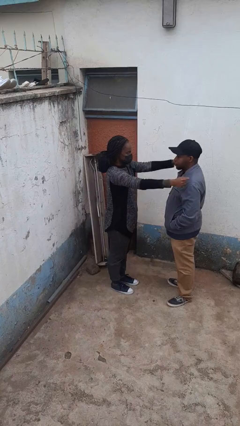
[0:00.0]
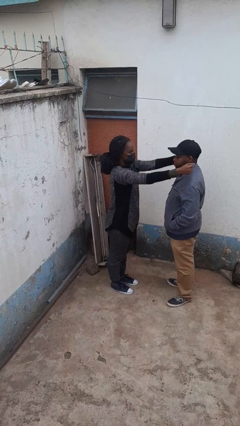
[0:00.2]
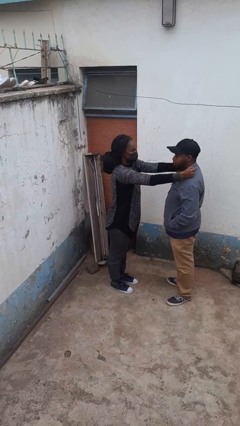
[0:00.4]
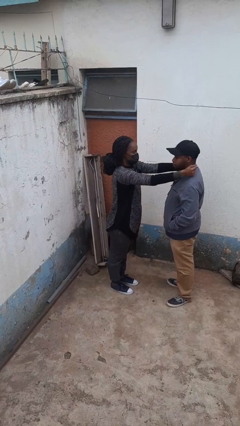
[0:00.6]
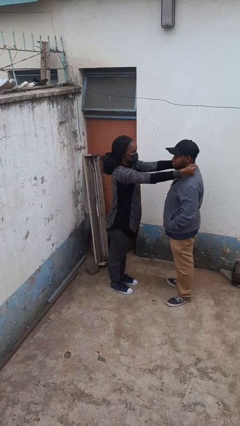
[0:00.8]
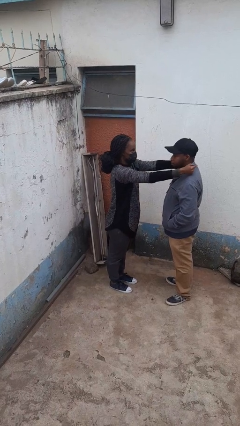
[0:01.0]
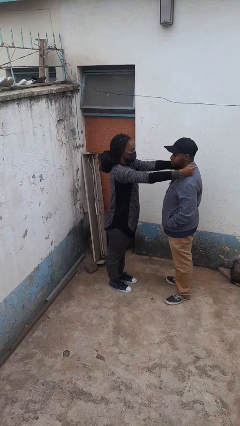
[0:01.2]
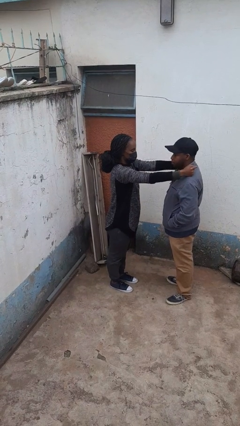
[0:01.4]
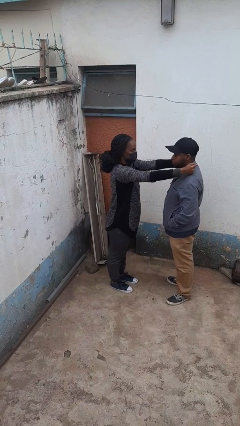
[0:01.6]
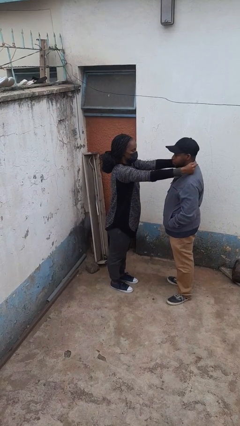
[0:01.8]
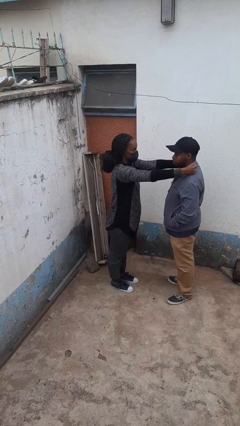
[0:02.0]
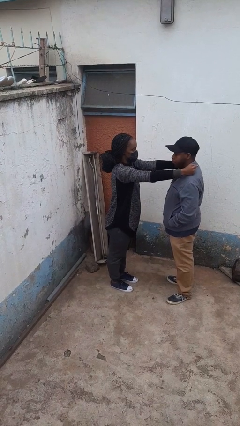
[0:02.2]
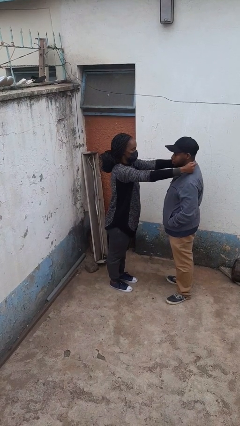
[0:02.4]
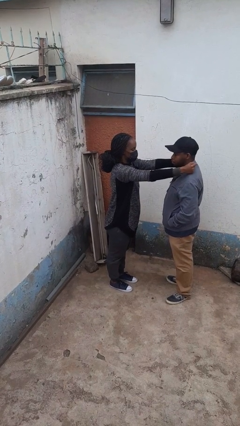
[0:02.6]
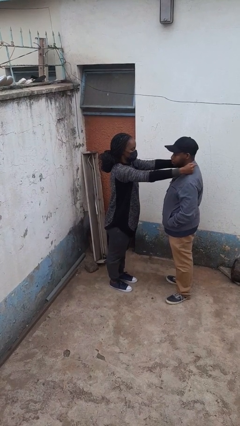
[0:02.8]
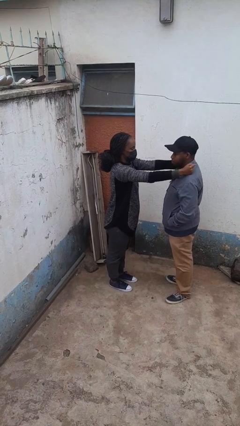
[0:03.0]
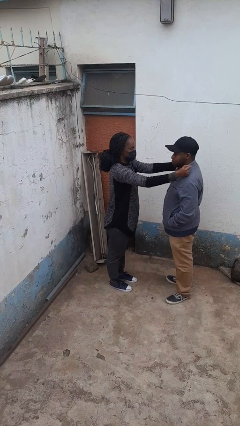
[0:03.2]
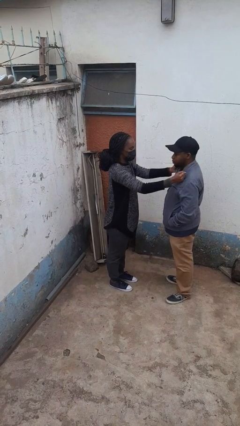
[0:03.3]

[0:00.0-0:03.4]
person pounds shoulders of person

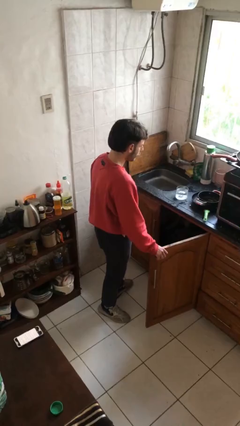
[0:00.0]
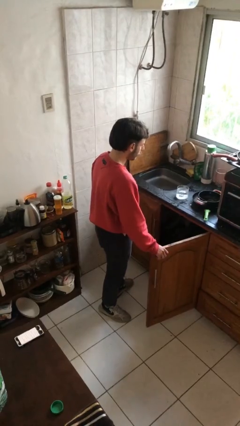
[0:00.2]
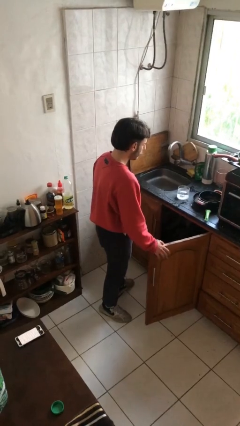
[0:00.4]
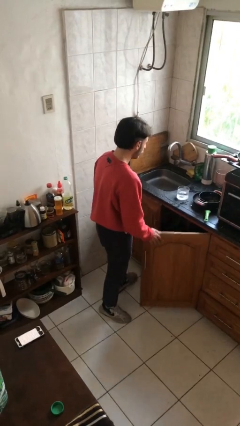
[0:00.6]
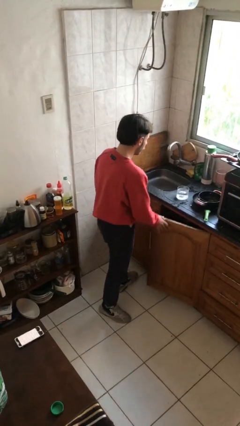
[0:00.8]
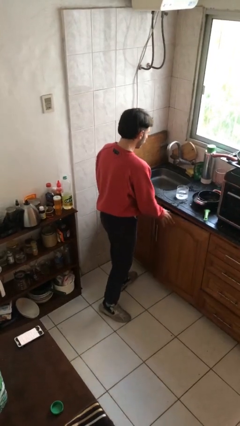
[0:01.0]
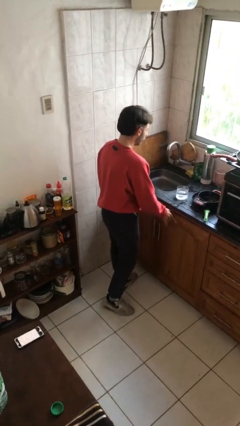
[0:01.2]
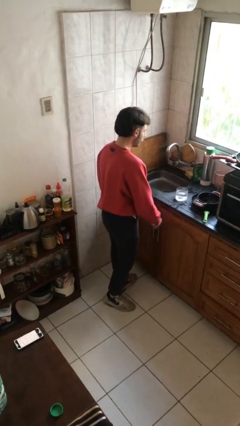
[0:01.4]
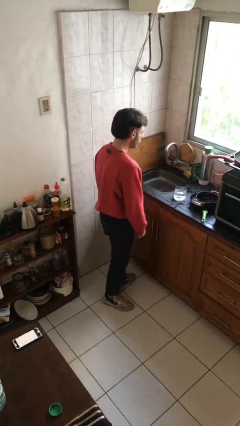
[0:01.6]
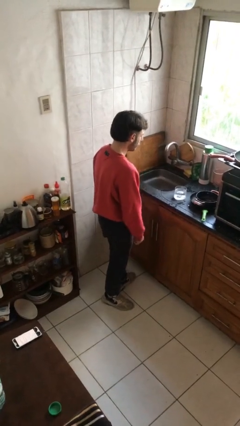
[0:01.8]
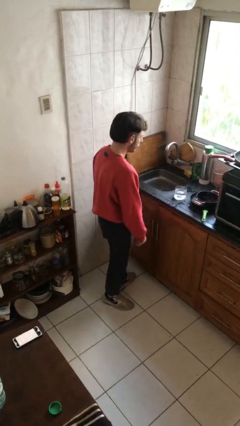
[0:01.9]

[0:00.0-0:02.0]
person closes cabinet

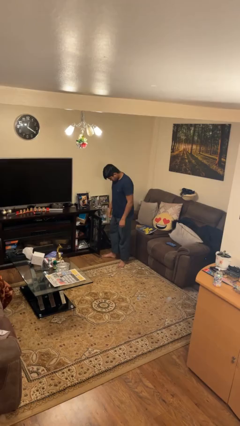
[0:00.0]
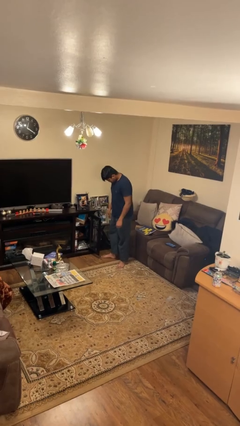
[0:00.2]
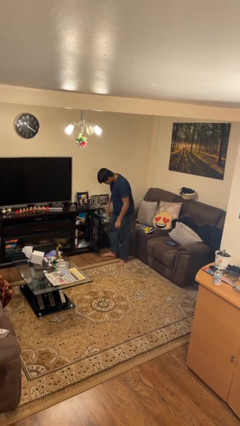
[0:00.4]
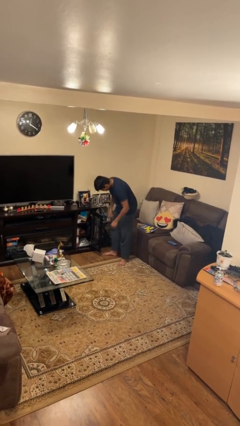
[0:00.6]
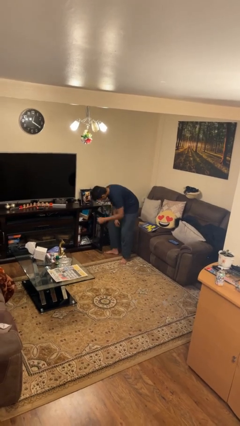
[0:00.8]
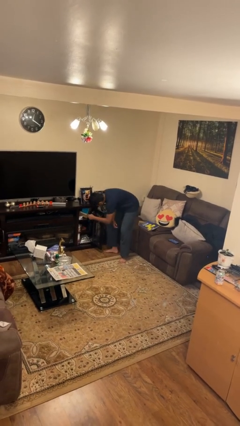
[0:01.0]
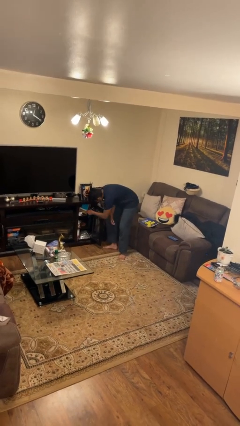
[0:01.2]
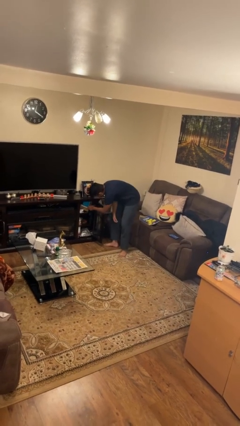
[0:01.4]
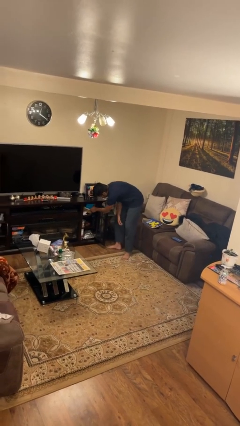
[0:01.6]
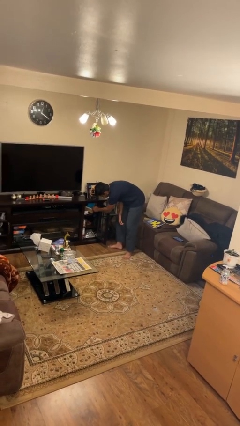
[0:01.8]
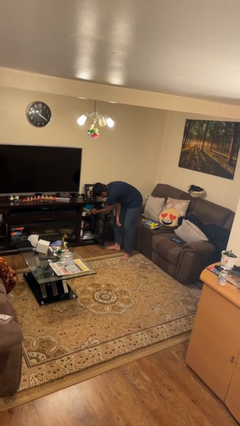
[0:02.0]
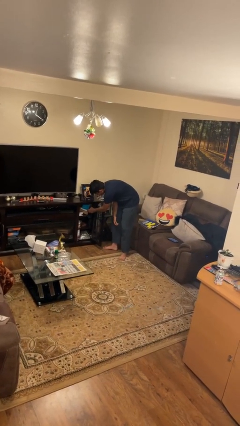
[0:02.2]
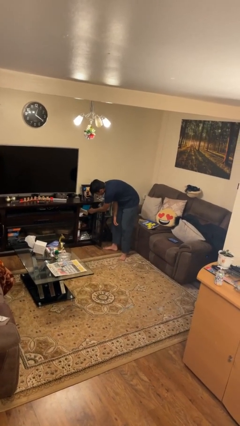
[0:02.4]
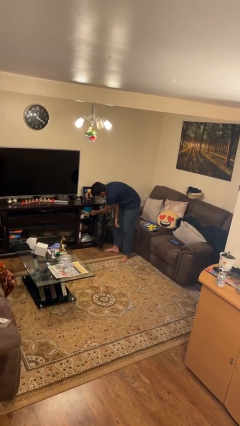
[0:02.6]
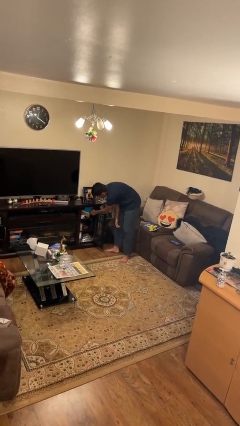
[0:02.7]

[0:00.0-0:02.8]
person searches in cabinet

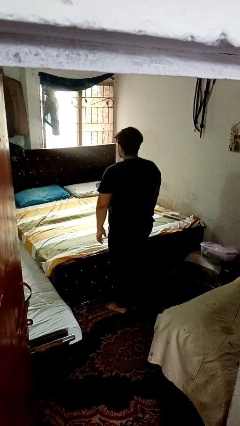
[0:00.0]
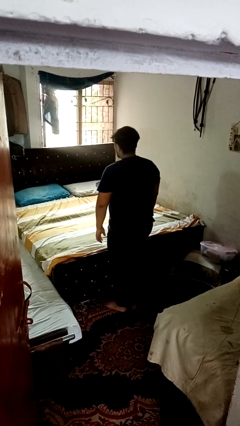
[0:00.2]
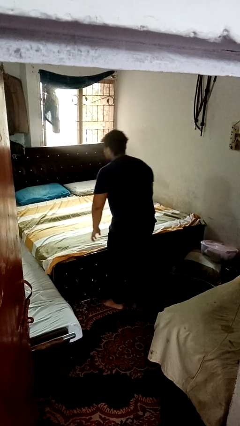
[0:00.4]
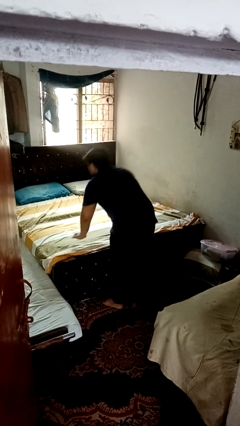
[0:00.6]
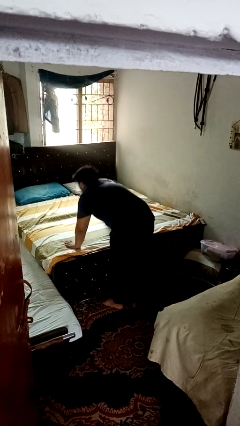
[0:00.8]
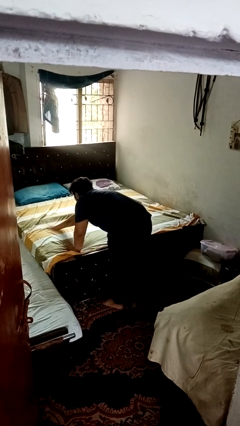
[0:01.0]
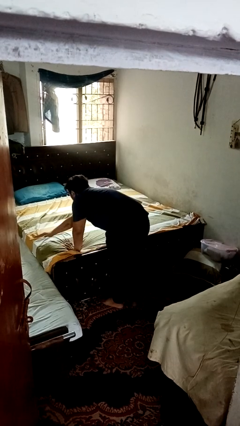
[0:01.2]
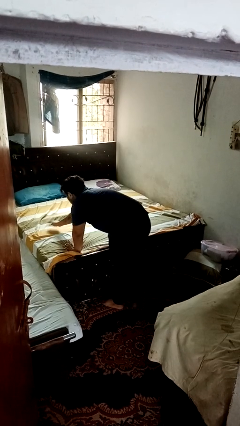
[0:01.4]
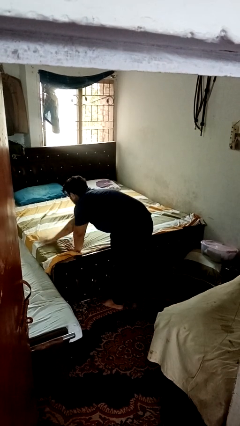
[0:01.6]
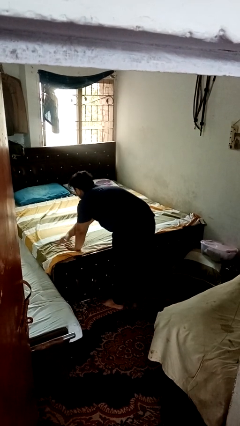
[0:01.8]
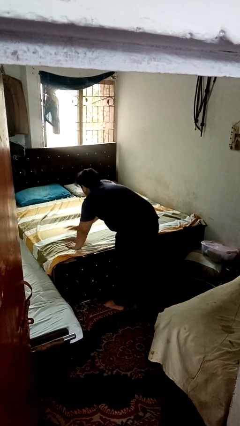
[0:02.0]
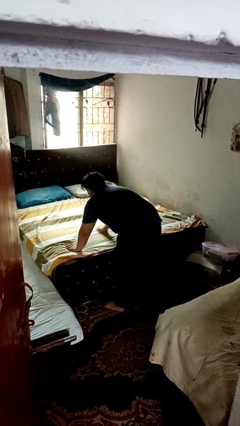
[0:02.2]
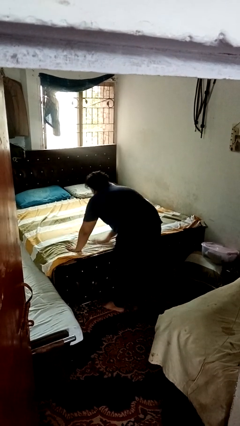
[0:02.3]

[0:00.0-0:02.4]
person makes bed

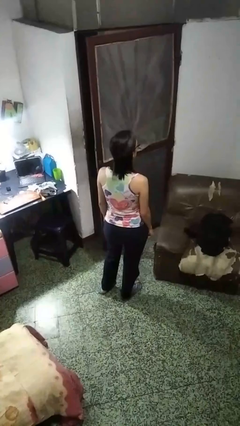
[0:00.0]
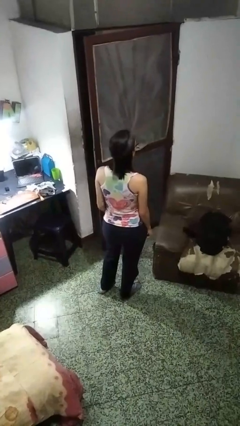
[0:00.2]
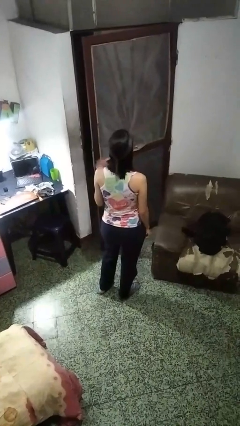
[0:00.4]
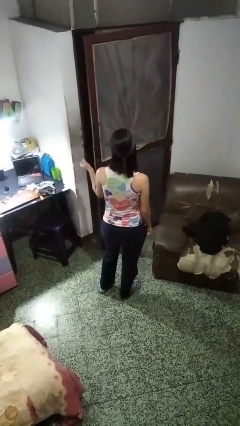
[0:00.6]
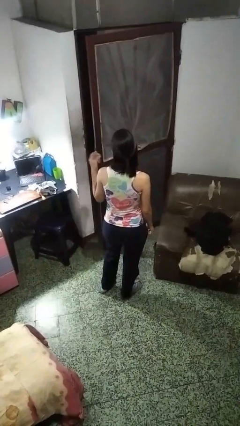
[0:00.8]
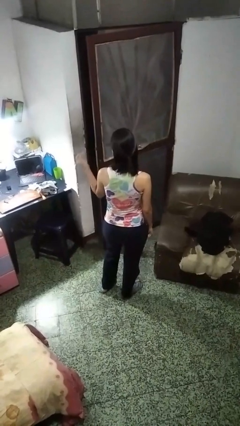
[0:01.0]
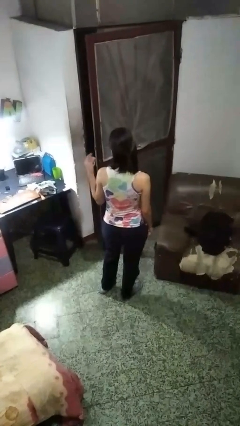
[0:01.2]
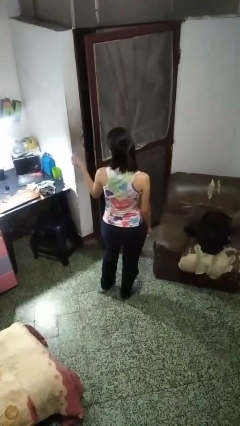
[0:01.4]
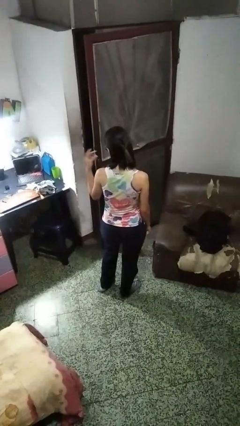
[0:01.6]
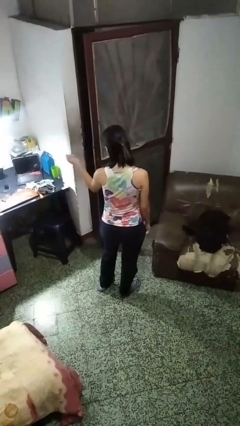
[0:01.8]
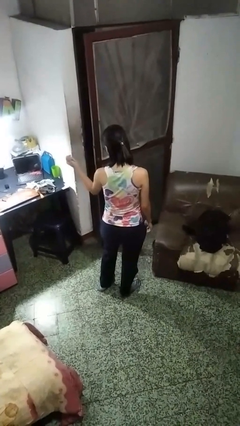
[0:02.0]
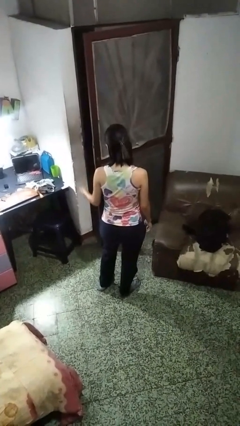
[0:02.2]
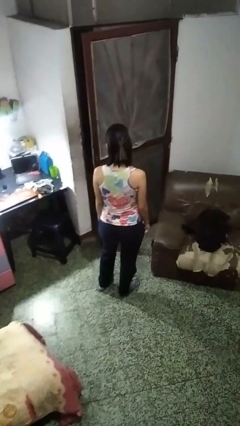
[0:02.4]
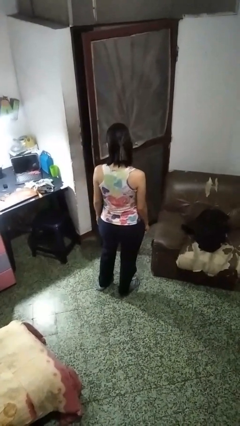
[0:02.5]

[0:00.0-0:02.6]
person snaps fingers

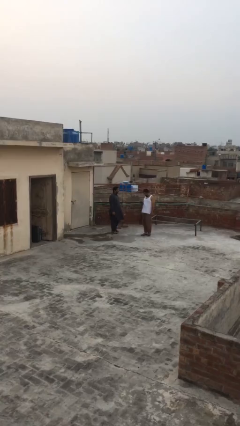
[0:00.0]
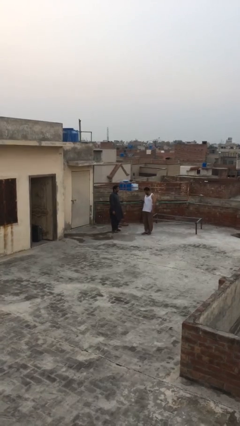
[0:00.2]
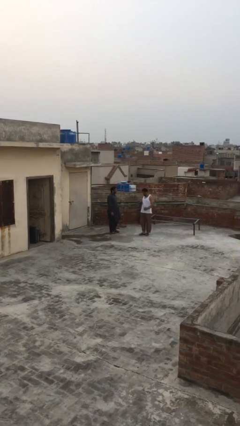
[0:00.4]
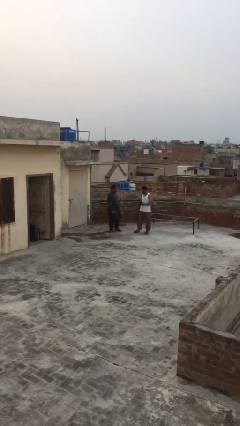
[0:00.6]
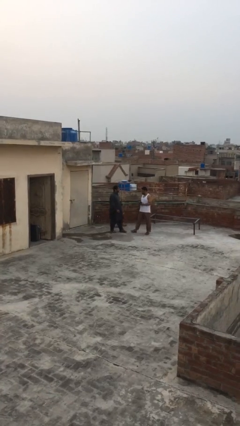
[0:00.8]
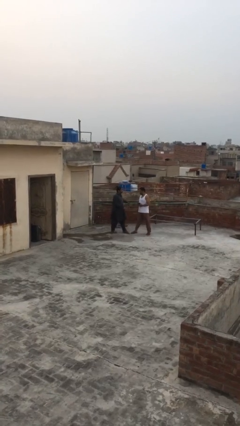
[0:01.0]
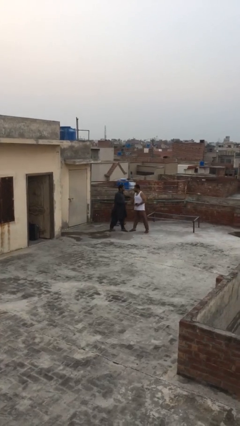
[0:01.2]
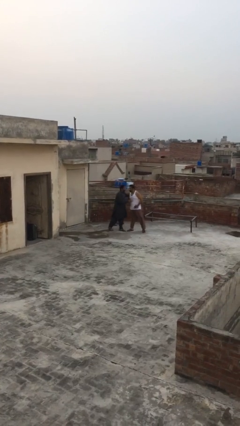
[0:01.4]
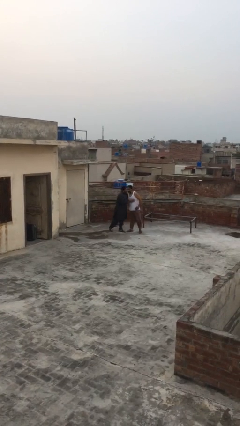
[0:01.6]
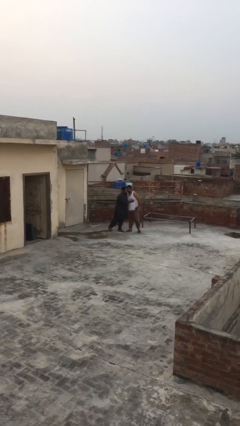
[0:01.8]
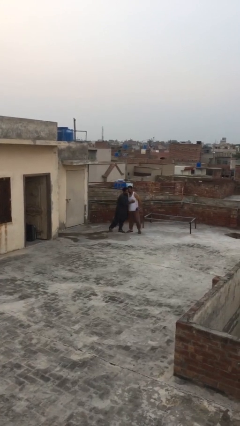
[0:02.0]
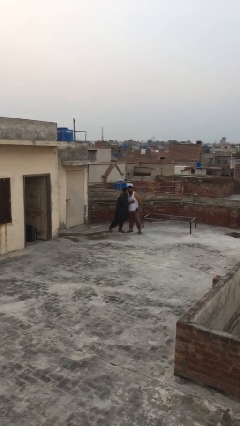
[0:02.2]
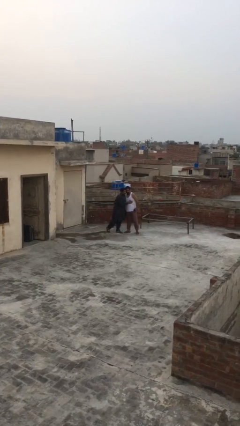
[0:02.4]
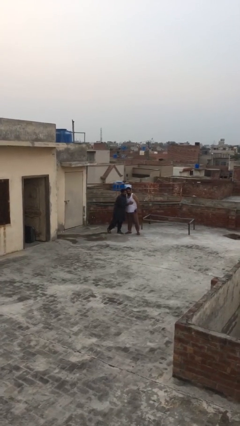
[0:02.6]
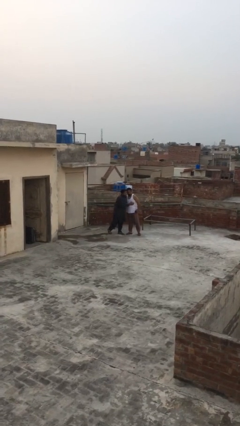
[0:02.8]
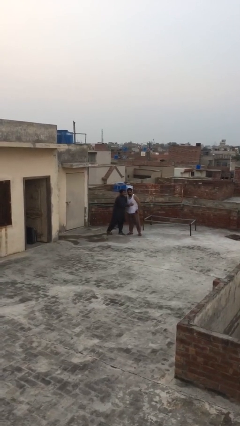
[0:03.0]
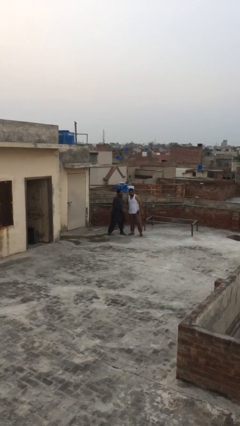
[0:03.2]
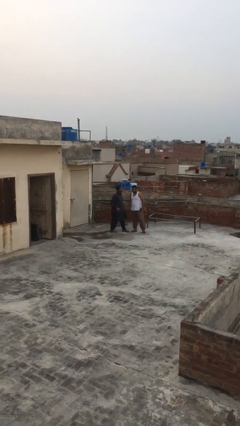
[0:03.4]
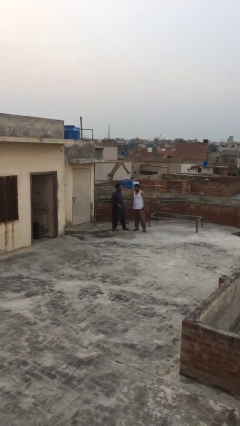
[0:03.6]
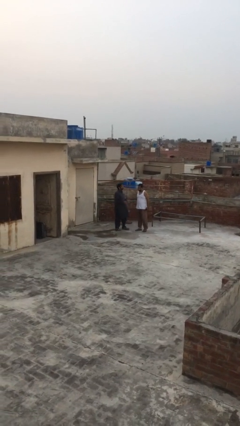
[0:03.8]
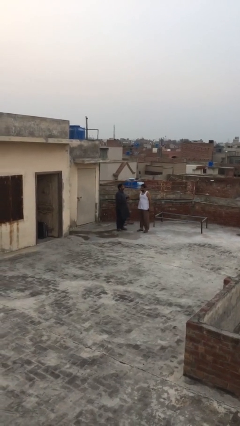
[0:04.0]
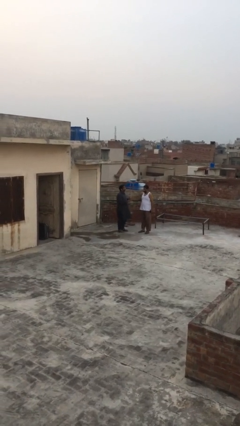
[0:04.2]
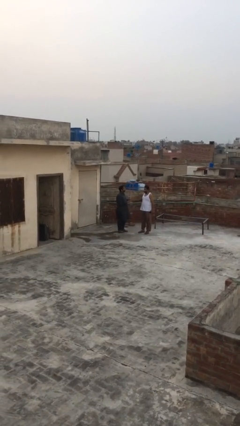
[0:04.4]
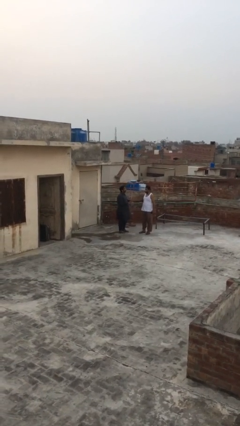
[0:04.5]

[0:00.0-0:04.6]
person embraces person
